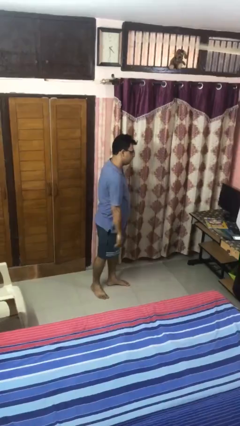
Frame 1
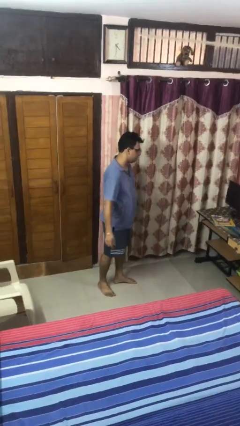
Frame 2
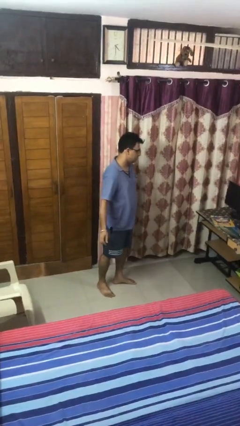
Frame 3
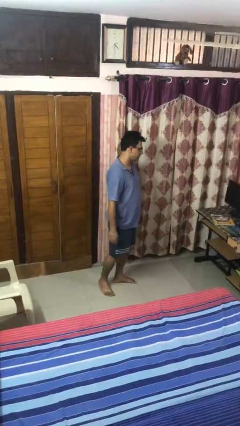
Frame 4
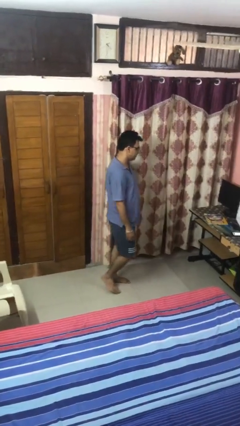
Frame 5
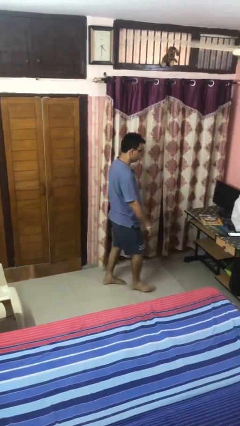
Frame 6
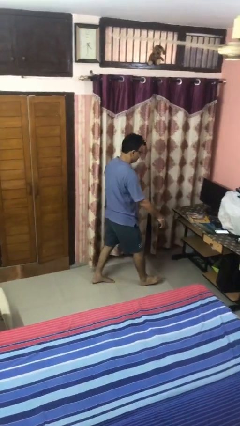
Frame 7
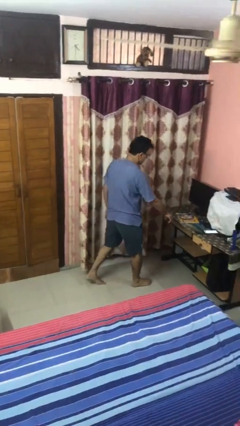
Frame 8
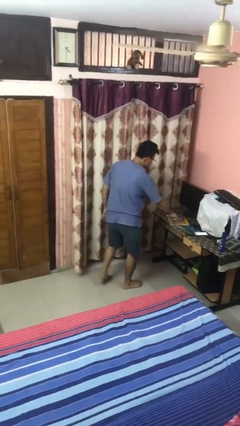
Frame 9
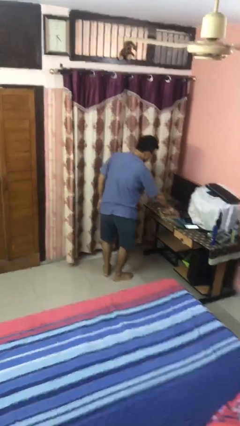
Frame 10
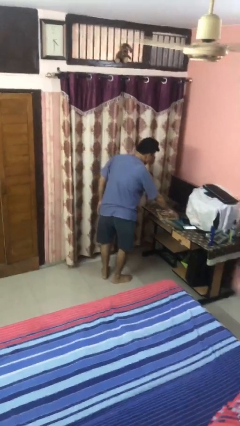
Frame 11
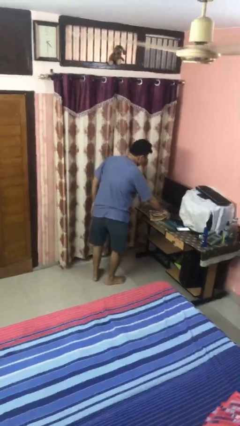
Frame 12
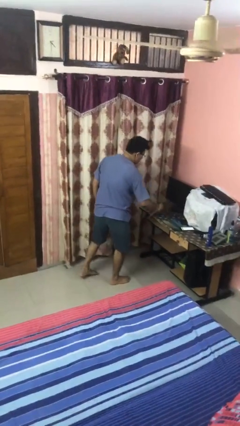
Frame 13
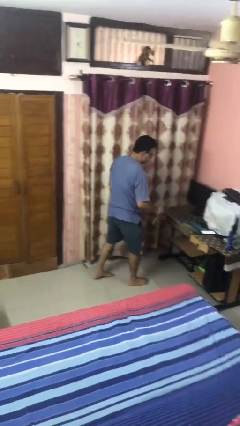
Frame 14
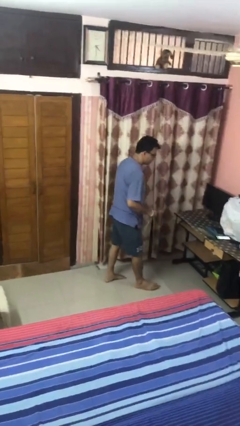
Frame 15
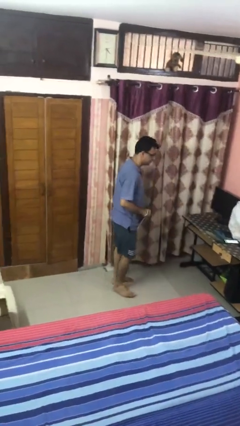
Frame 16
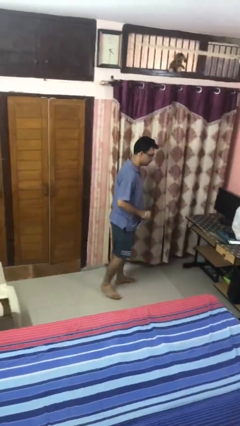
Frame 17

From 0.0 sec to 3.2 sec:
person picks up object from table

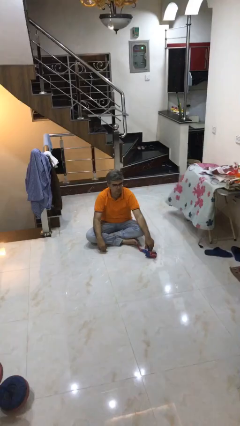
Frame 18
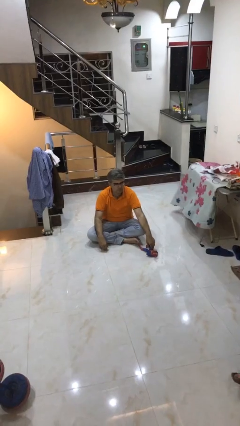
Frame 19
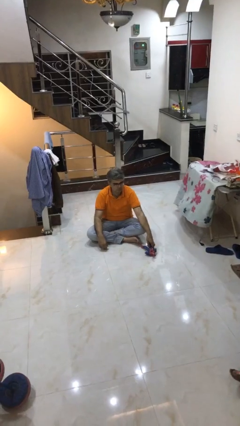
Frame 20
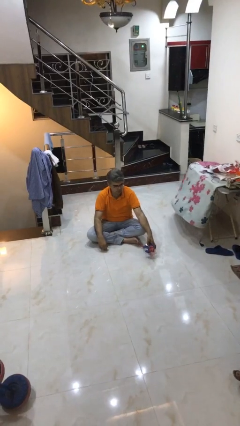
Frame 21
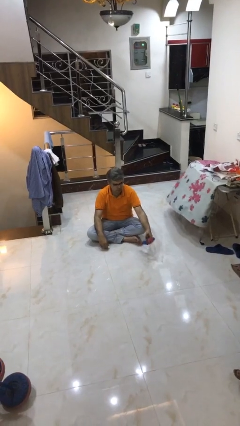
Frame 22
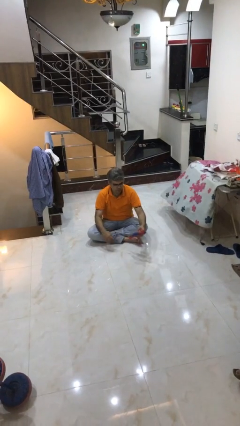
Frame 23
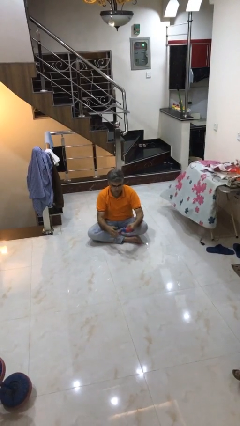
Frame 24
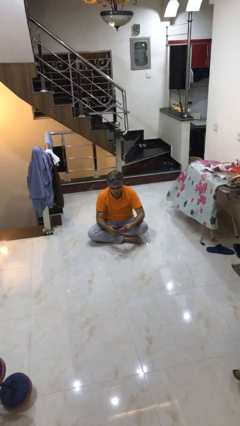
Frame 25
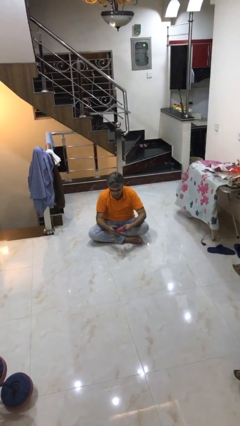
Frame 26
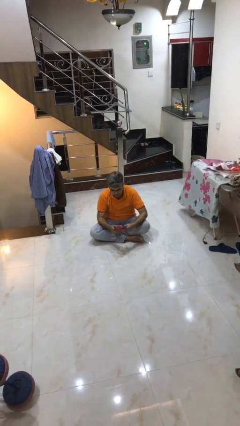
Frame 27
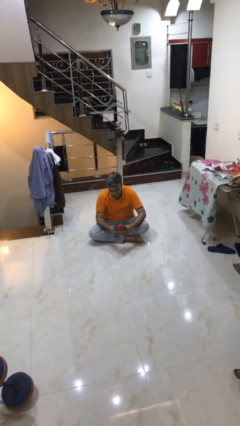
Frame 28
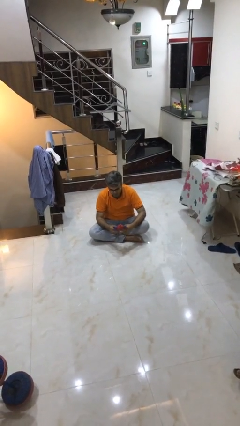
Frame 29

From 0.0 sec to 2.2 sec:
person picks up object from floor

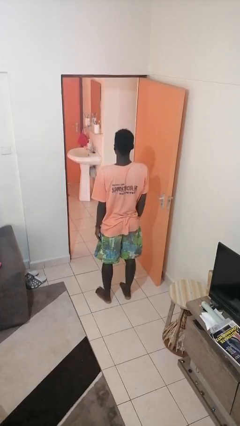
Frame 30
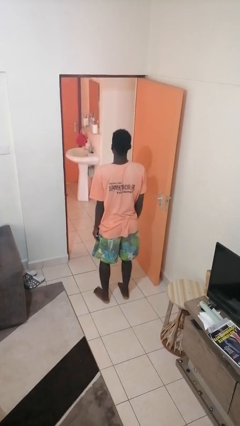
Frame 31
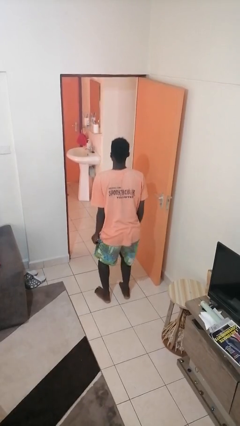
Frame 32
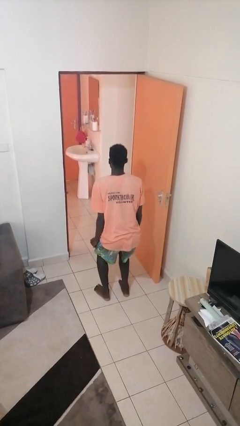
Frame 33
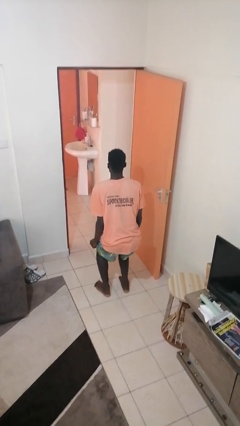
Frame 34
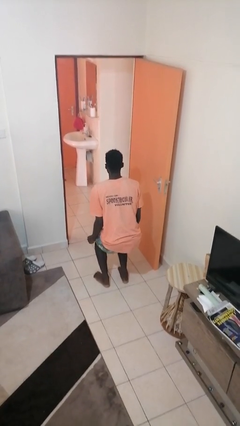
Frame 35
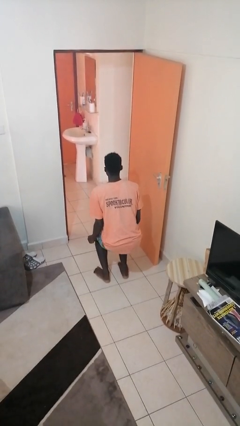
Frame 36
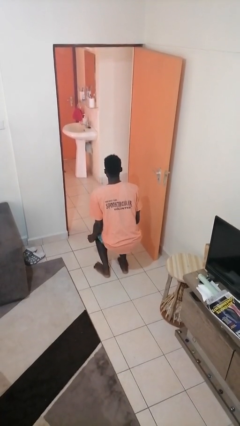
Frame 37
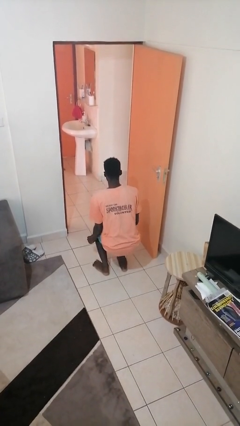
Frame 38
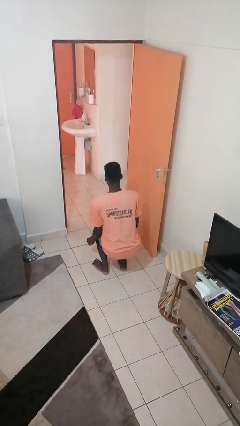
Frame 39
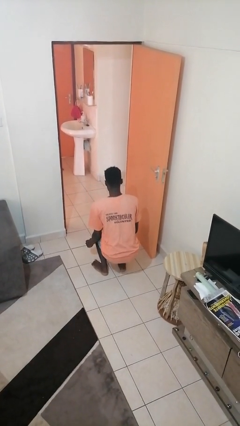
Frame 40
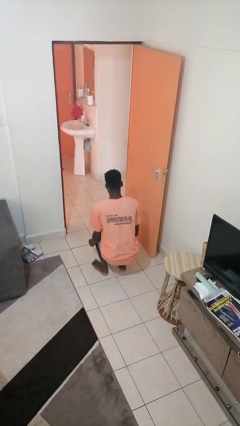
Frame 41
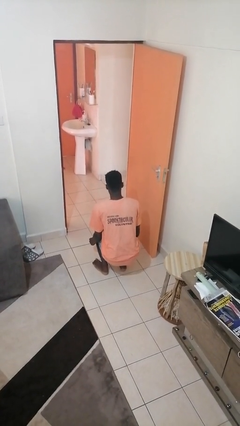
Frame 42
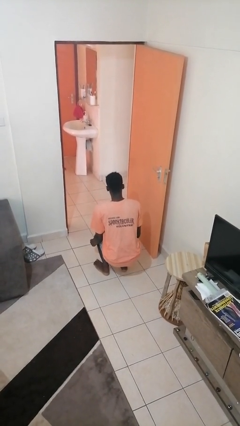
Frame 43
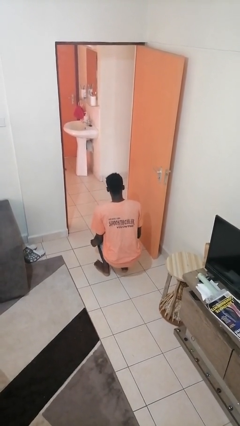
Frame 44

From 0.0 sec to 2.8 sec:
person squats

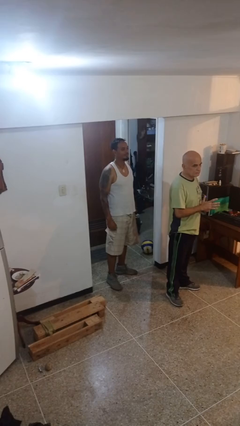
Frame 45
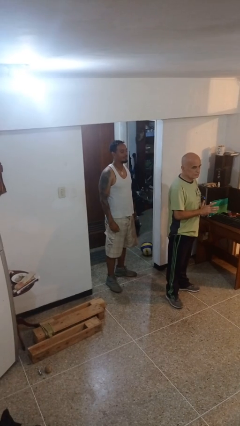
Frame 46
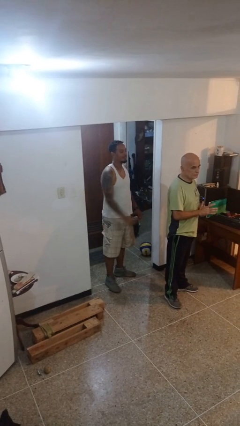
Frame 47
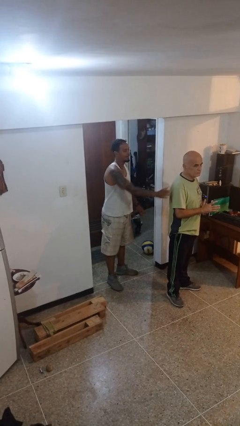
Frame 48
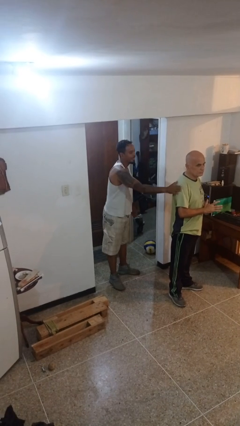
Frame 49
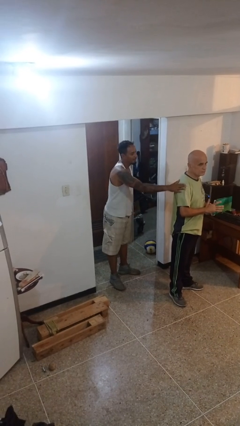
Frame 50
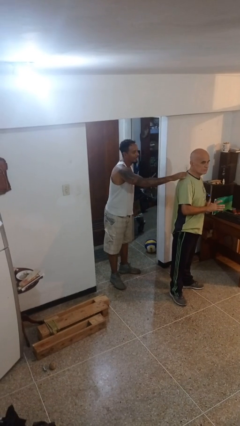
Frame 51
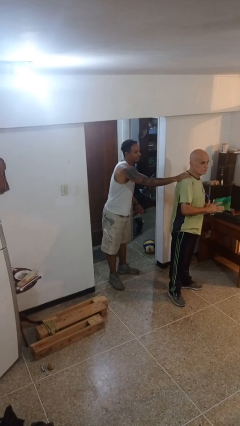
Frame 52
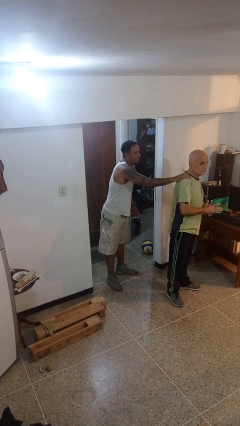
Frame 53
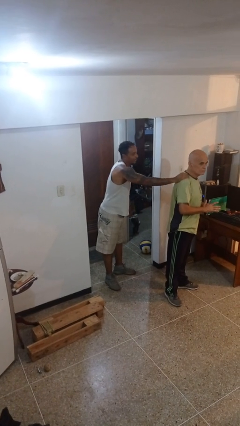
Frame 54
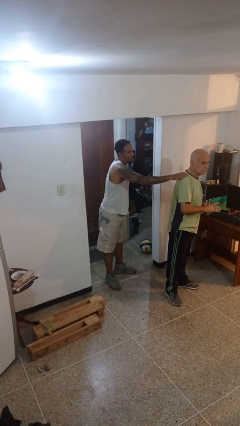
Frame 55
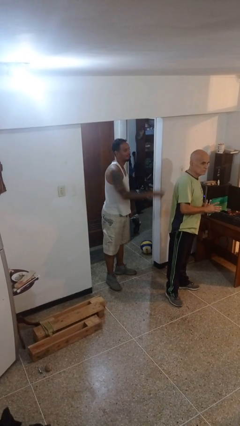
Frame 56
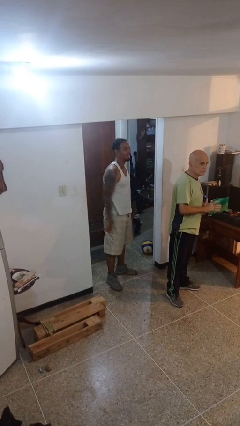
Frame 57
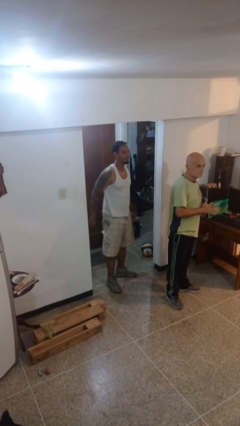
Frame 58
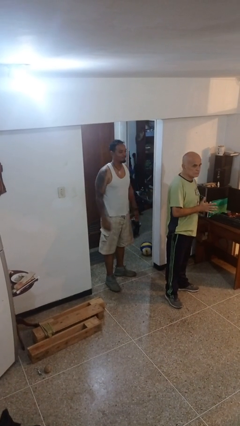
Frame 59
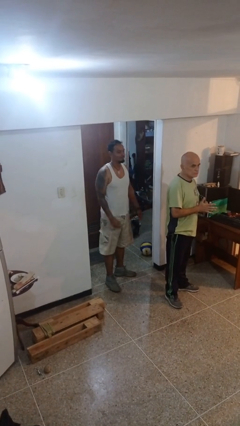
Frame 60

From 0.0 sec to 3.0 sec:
person touches back of person

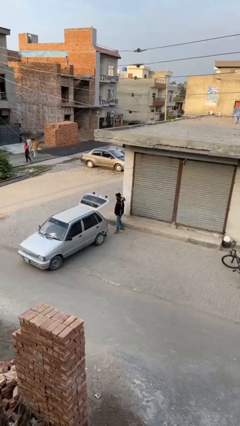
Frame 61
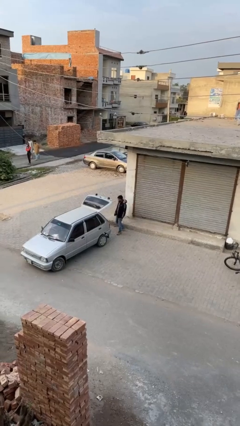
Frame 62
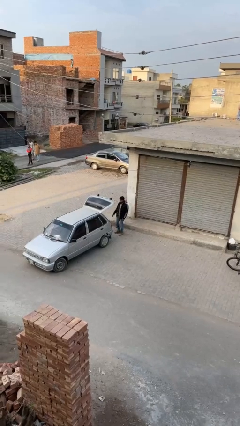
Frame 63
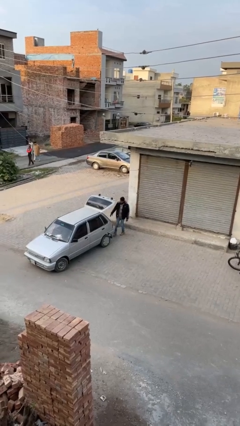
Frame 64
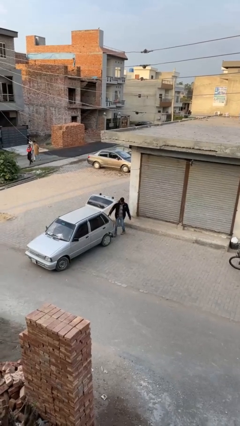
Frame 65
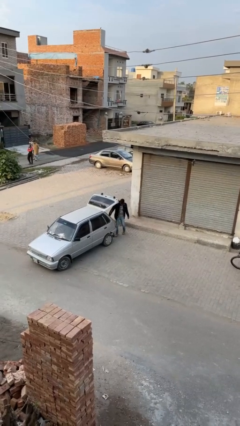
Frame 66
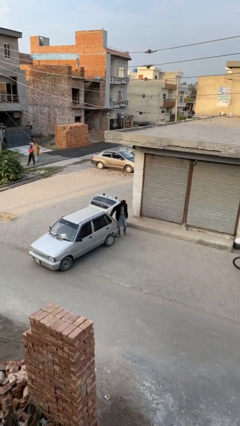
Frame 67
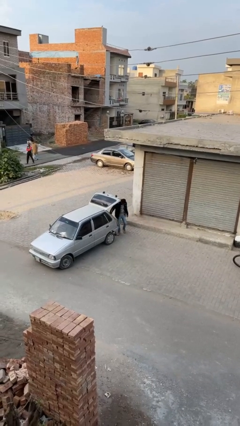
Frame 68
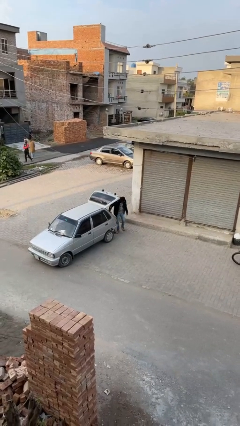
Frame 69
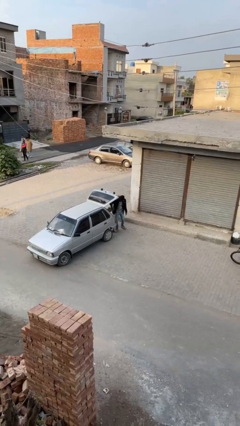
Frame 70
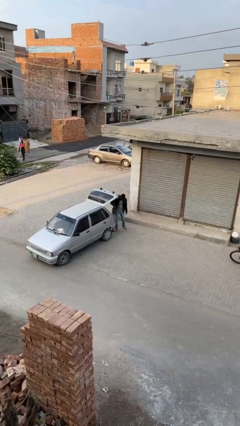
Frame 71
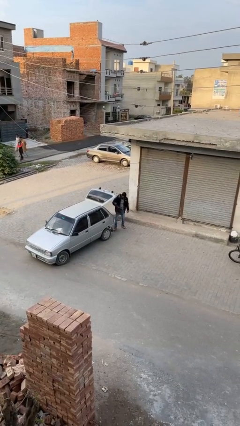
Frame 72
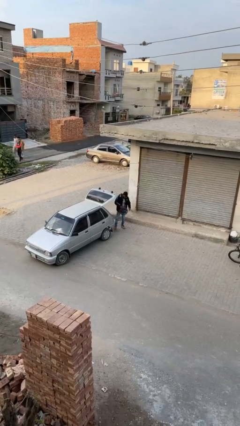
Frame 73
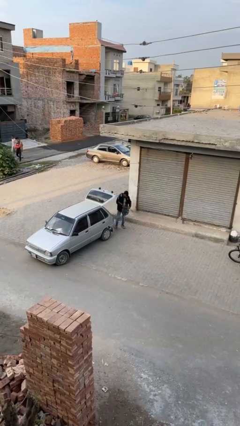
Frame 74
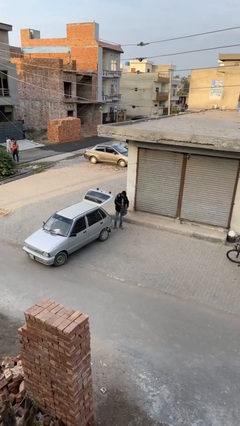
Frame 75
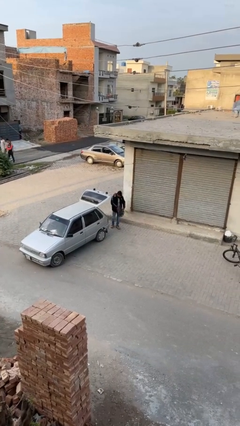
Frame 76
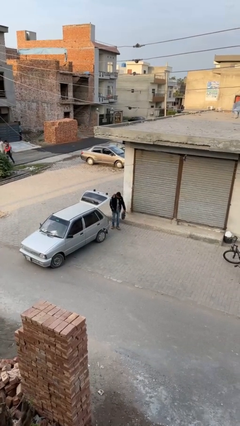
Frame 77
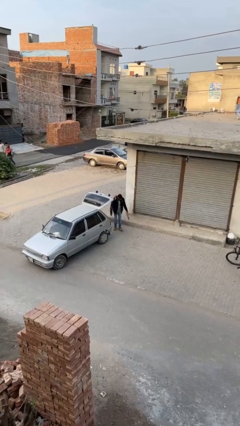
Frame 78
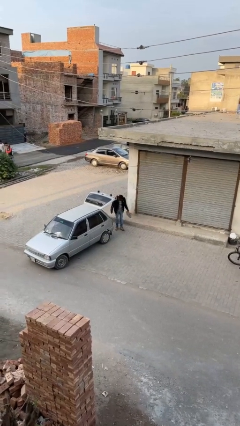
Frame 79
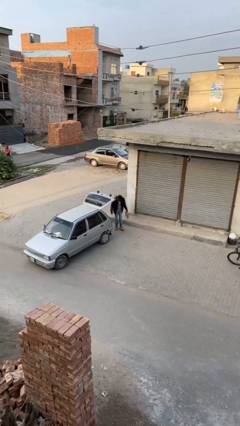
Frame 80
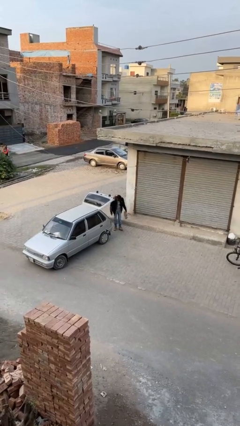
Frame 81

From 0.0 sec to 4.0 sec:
person unloads car

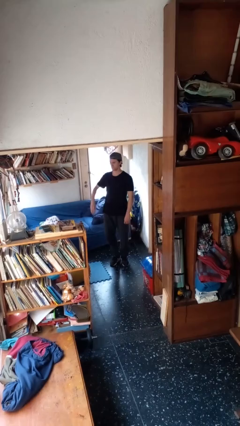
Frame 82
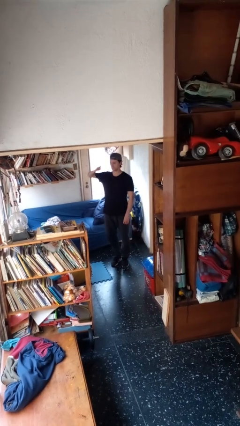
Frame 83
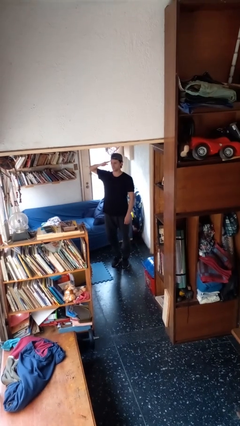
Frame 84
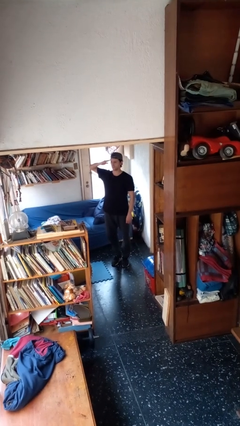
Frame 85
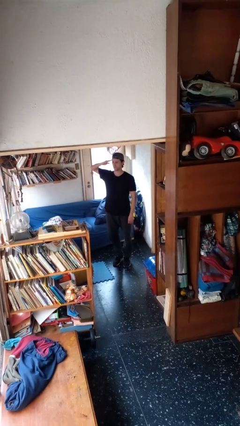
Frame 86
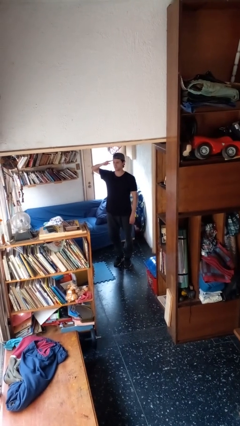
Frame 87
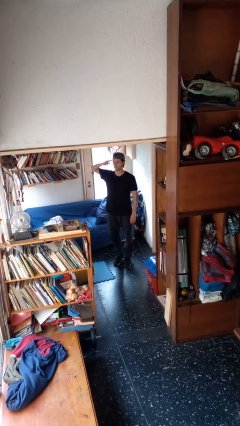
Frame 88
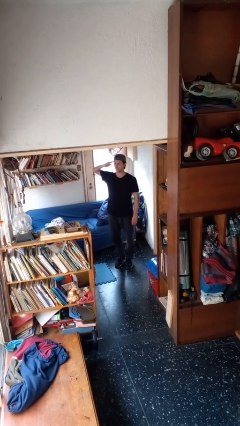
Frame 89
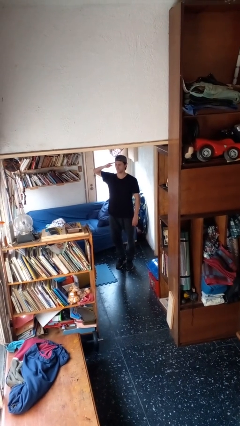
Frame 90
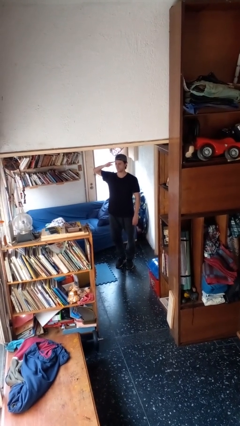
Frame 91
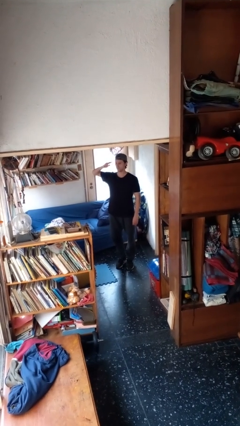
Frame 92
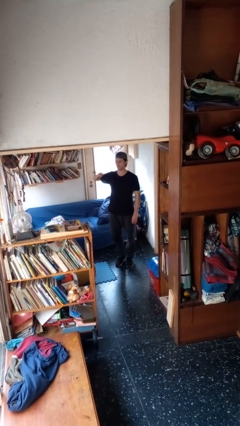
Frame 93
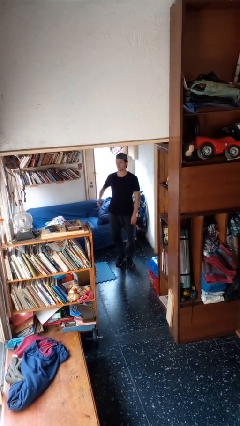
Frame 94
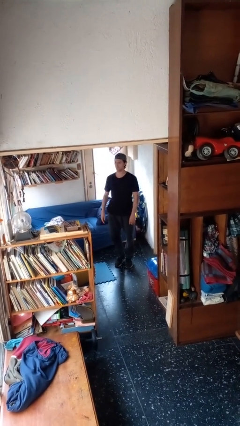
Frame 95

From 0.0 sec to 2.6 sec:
person salutes
